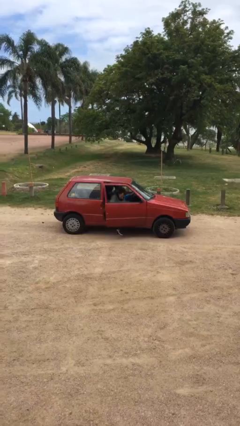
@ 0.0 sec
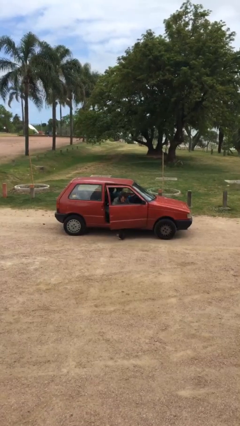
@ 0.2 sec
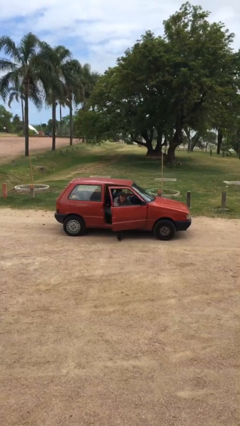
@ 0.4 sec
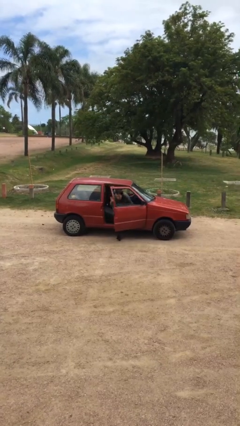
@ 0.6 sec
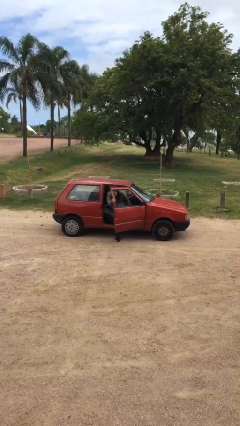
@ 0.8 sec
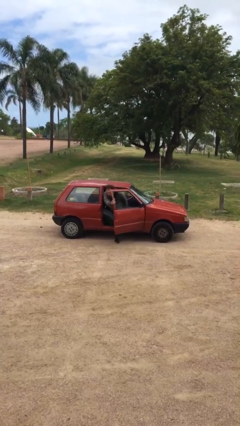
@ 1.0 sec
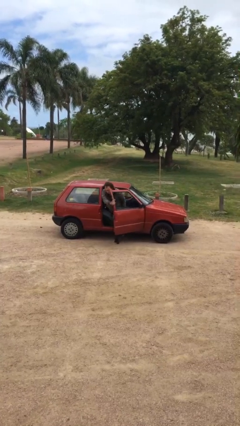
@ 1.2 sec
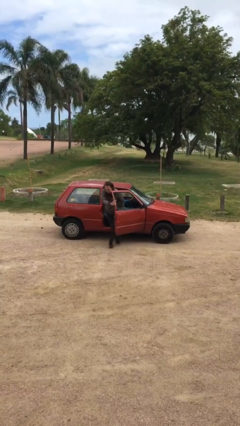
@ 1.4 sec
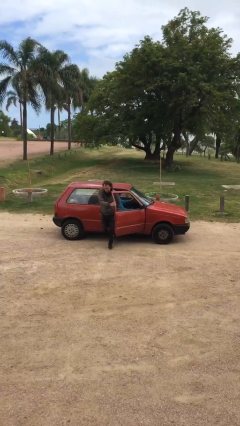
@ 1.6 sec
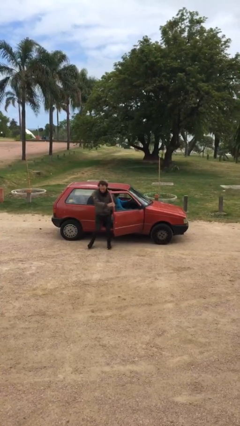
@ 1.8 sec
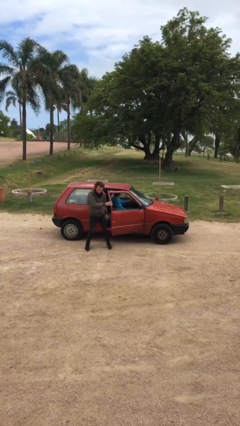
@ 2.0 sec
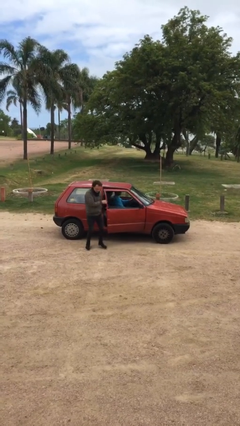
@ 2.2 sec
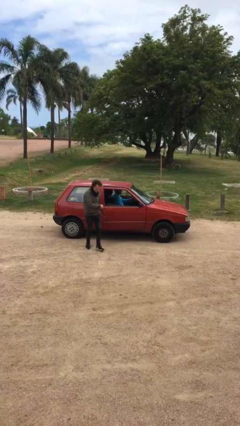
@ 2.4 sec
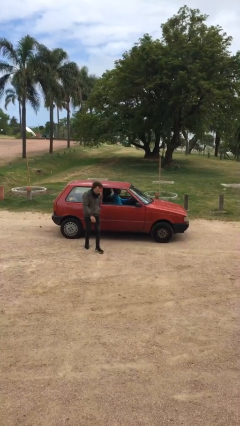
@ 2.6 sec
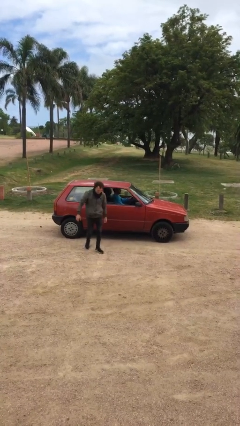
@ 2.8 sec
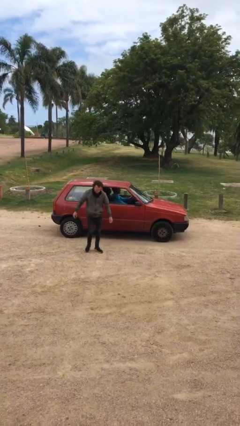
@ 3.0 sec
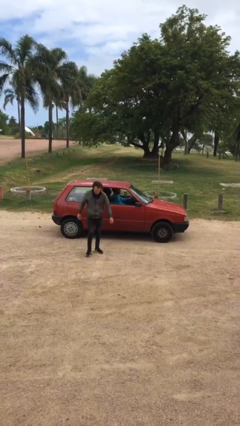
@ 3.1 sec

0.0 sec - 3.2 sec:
car drops off person

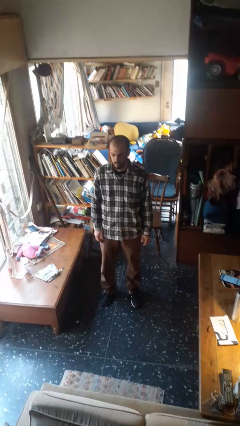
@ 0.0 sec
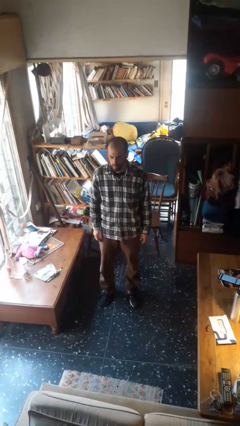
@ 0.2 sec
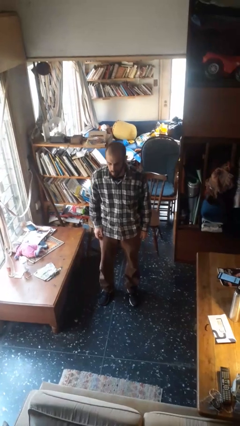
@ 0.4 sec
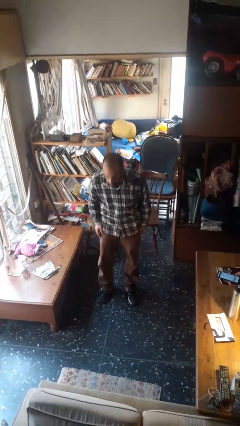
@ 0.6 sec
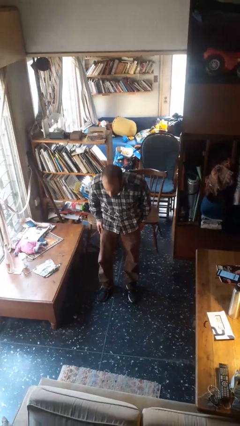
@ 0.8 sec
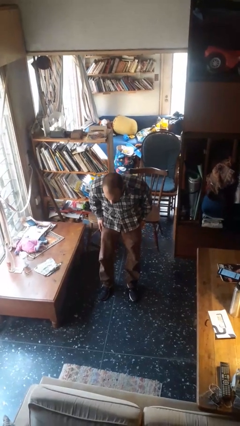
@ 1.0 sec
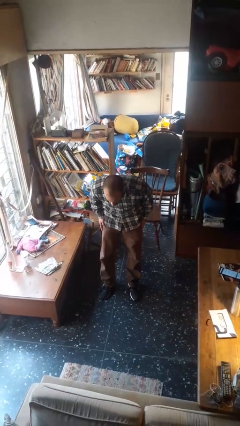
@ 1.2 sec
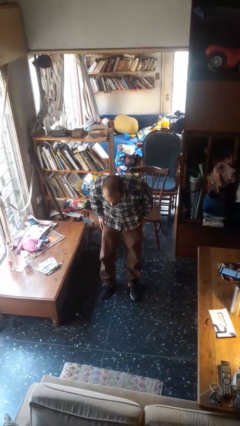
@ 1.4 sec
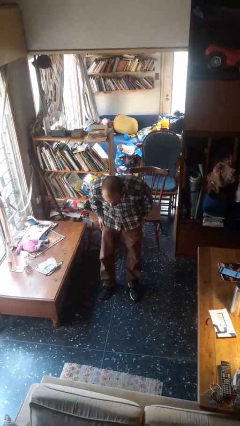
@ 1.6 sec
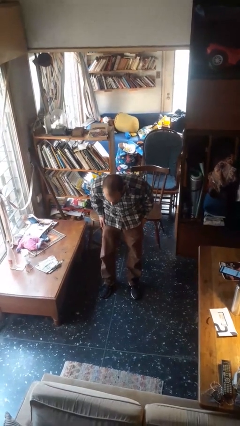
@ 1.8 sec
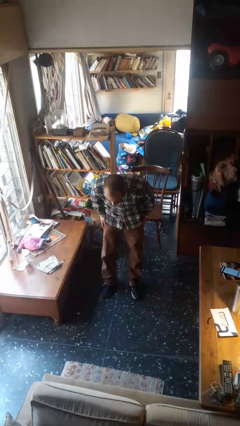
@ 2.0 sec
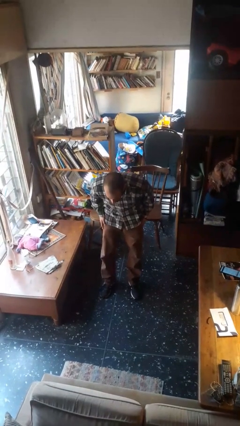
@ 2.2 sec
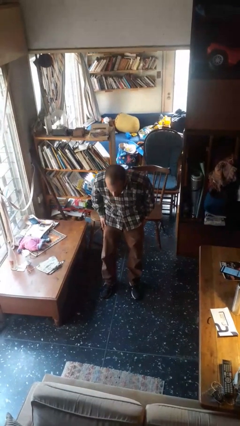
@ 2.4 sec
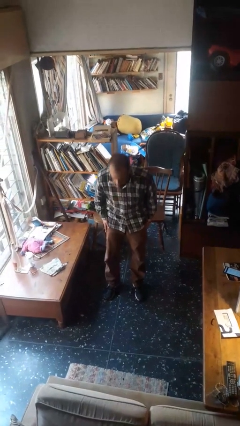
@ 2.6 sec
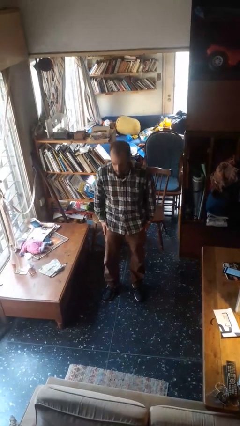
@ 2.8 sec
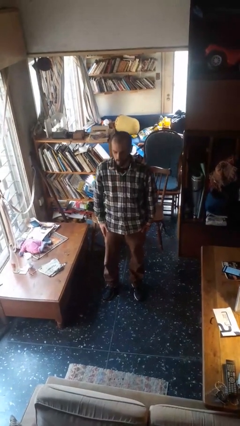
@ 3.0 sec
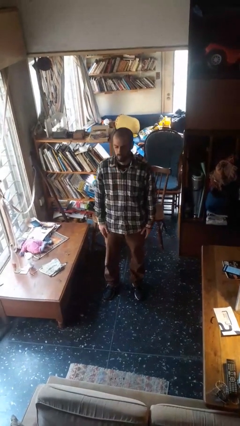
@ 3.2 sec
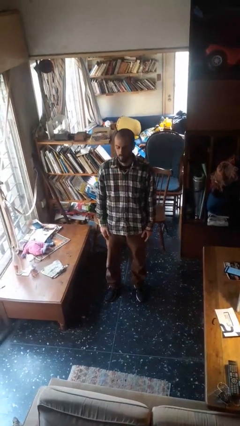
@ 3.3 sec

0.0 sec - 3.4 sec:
person bows

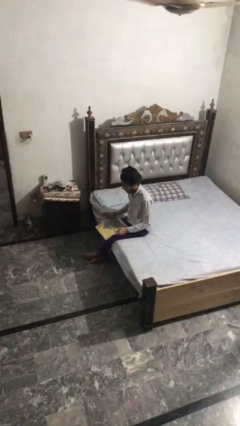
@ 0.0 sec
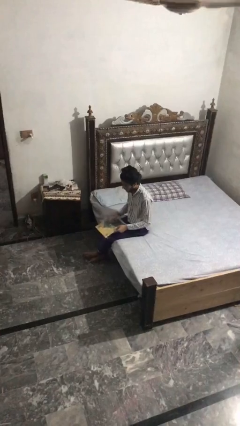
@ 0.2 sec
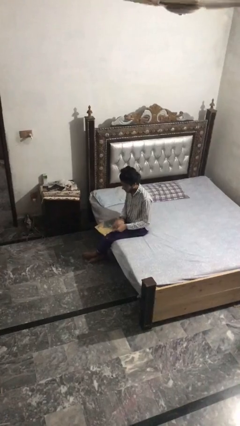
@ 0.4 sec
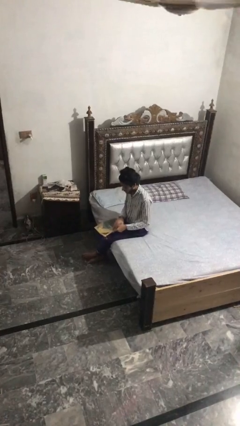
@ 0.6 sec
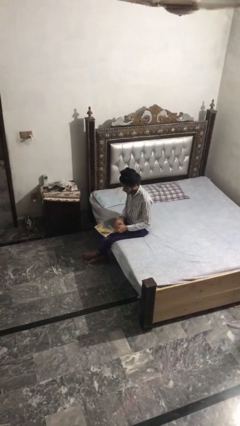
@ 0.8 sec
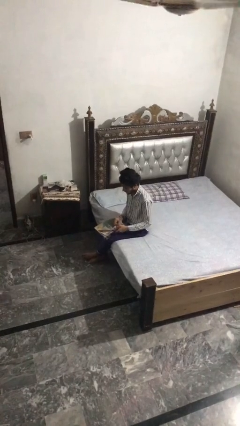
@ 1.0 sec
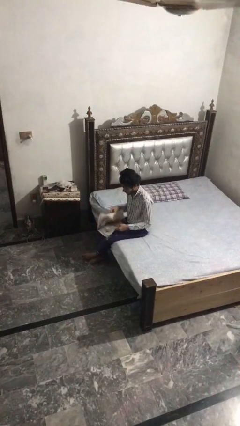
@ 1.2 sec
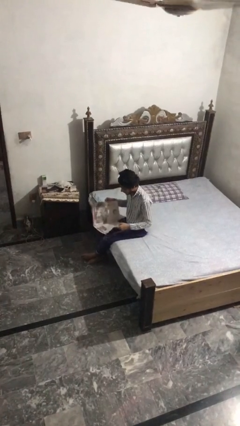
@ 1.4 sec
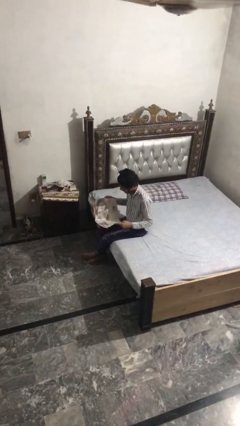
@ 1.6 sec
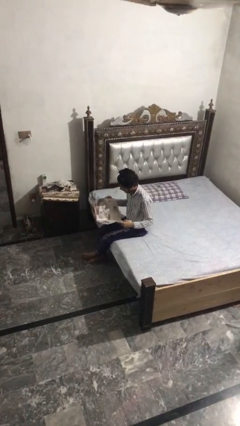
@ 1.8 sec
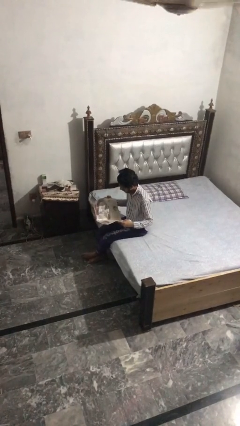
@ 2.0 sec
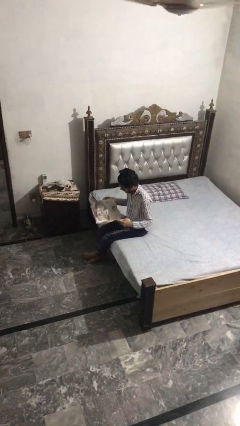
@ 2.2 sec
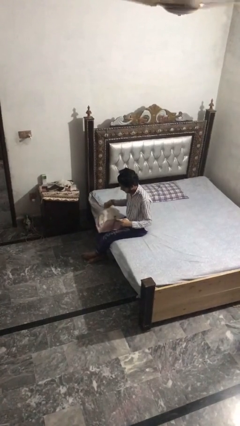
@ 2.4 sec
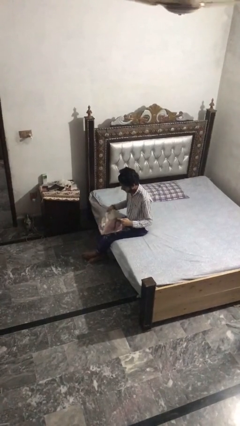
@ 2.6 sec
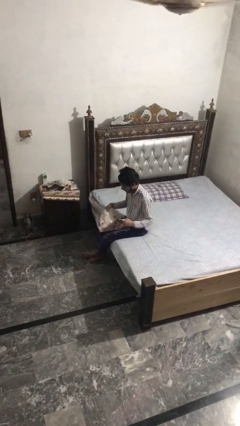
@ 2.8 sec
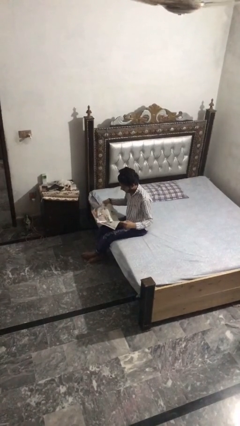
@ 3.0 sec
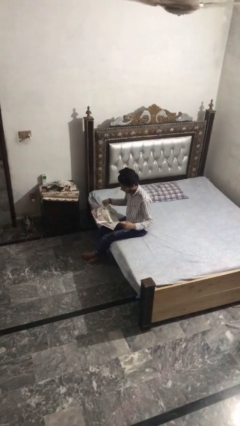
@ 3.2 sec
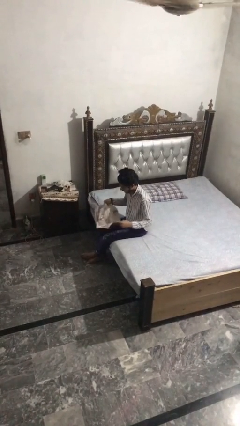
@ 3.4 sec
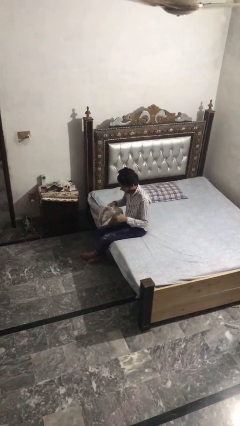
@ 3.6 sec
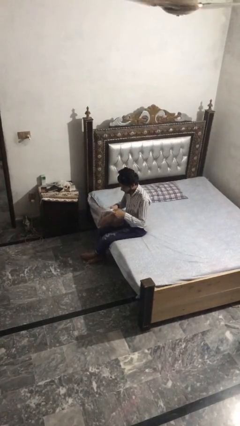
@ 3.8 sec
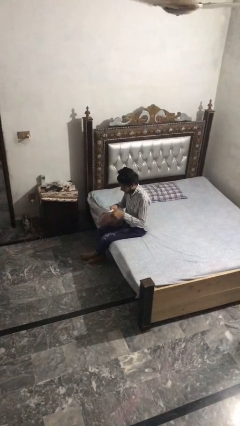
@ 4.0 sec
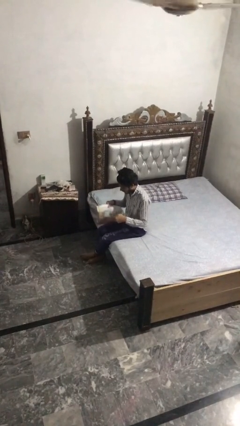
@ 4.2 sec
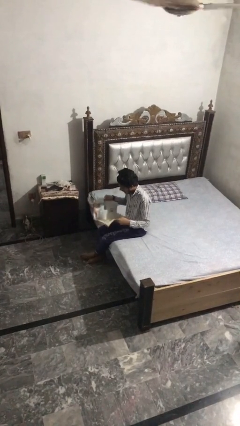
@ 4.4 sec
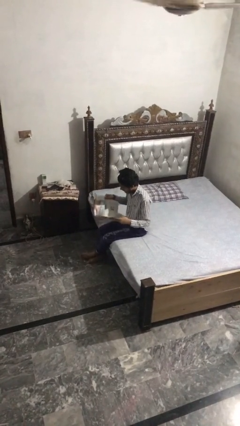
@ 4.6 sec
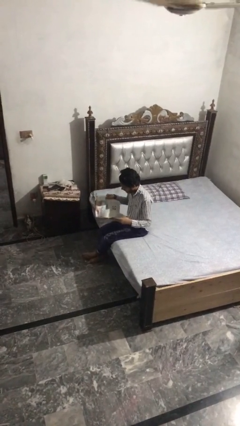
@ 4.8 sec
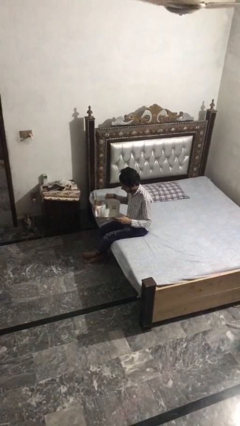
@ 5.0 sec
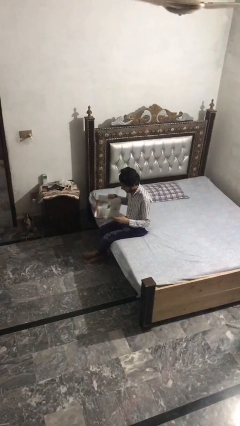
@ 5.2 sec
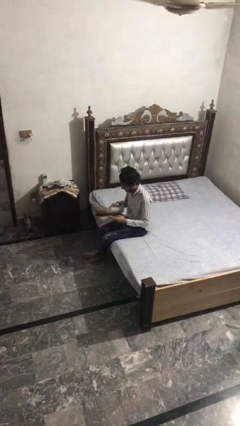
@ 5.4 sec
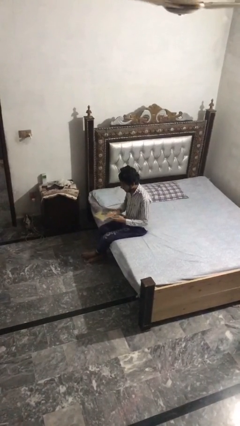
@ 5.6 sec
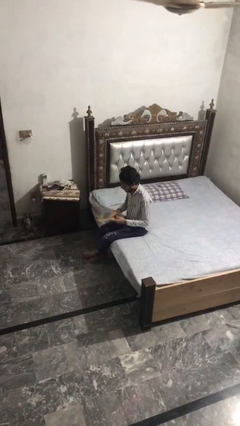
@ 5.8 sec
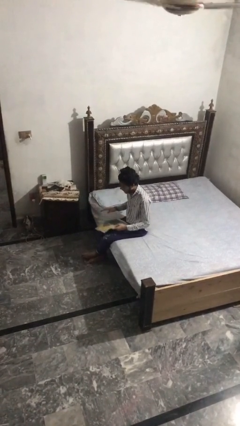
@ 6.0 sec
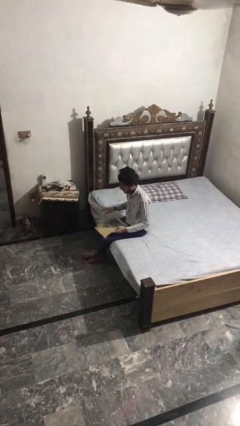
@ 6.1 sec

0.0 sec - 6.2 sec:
person reads magazine

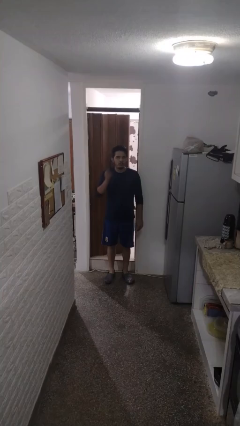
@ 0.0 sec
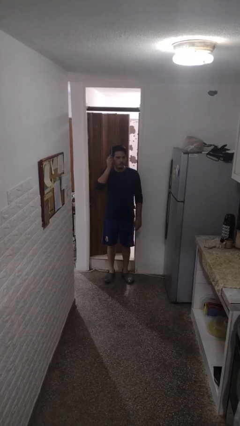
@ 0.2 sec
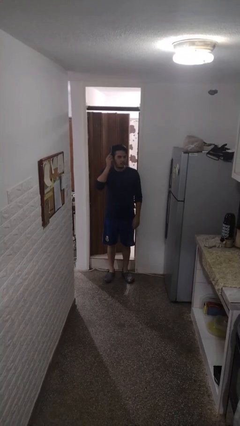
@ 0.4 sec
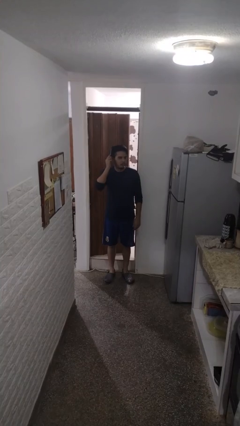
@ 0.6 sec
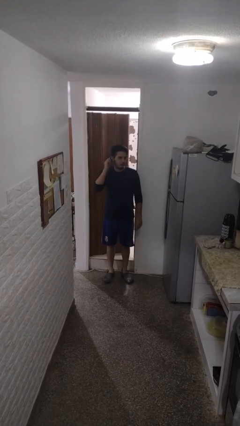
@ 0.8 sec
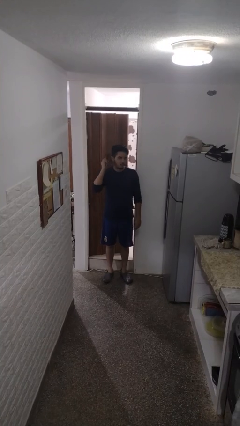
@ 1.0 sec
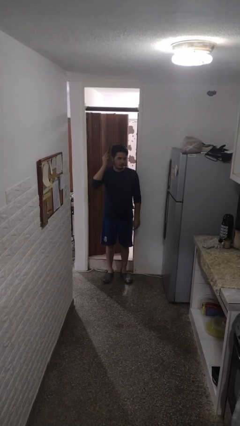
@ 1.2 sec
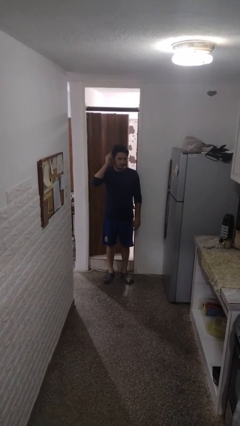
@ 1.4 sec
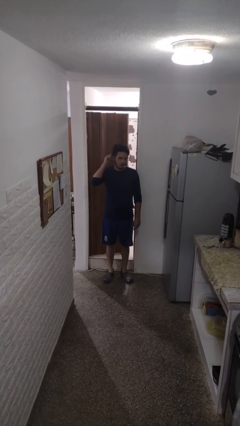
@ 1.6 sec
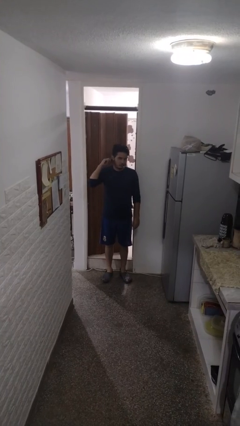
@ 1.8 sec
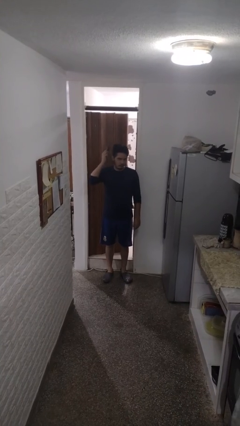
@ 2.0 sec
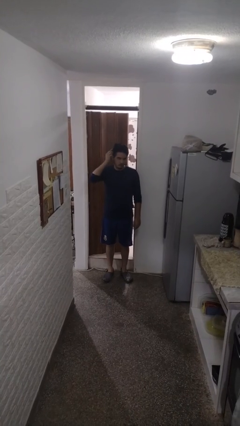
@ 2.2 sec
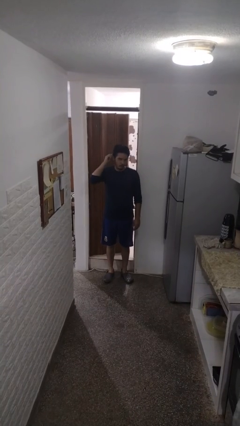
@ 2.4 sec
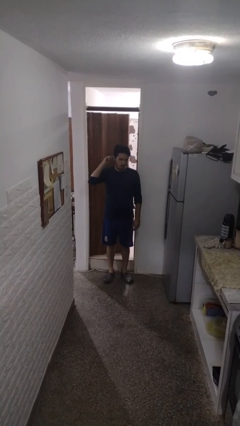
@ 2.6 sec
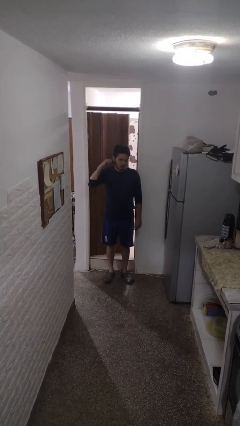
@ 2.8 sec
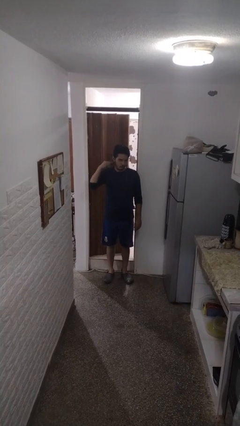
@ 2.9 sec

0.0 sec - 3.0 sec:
person brushes hair

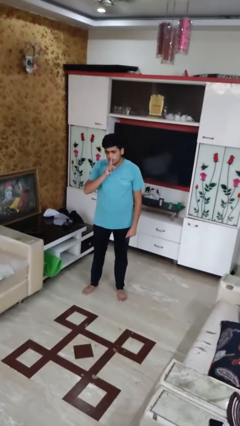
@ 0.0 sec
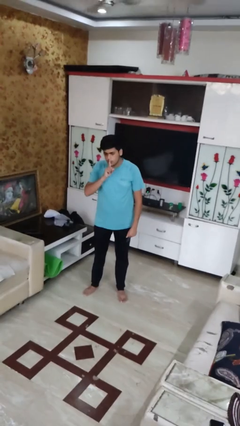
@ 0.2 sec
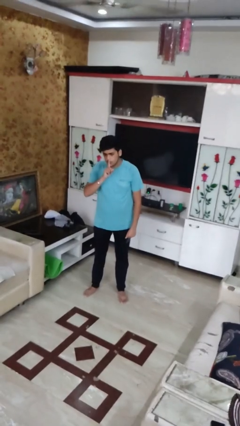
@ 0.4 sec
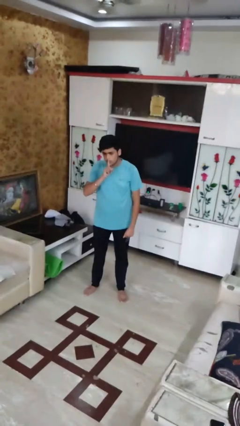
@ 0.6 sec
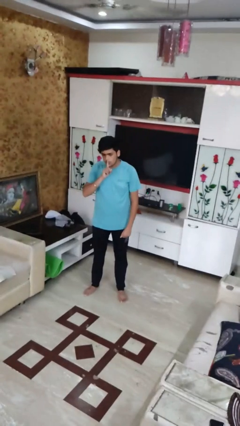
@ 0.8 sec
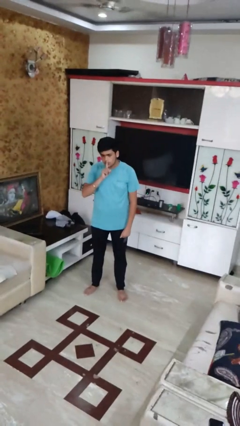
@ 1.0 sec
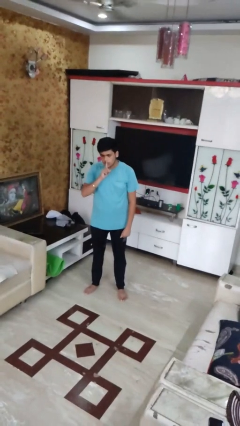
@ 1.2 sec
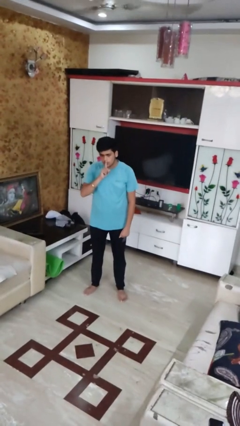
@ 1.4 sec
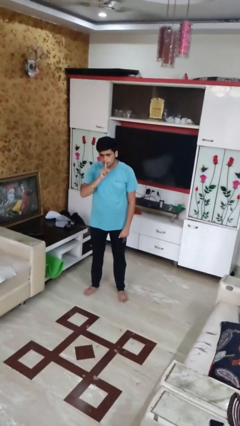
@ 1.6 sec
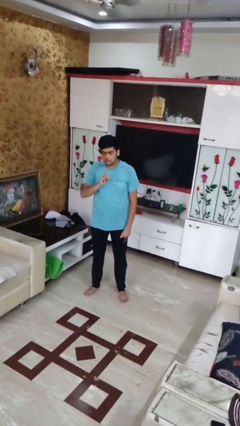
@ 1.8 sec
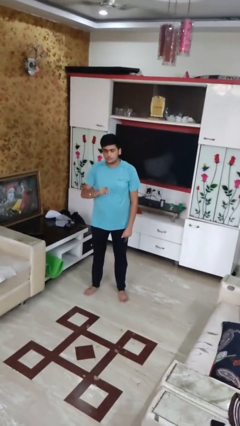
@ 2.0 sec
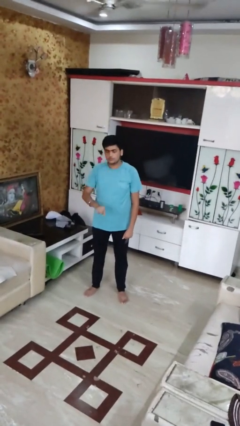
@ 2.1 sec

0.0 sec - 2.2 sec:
person gestures be quiet
